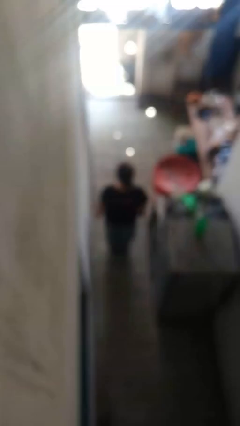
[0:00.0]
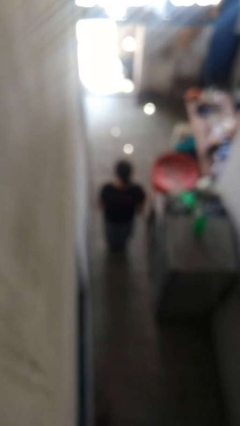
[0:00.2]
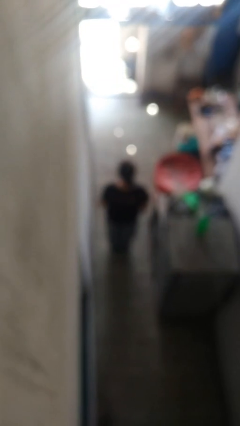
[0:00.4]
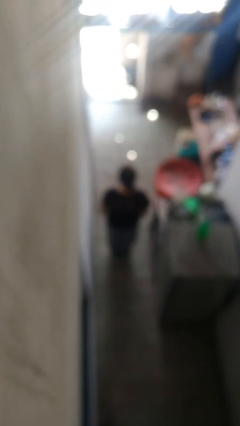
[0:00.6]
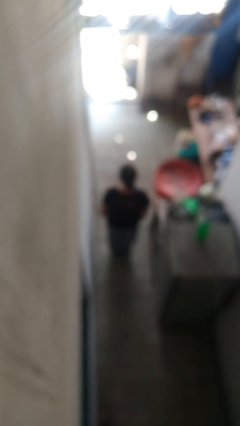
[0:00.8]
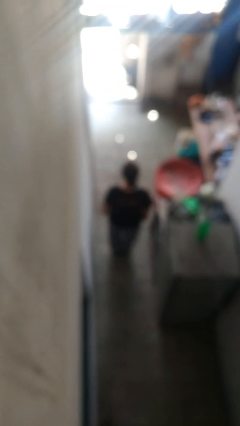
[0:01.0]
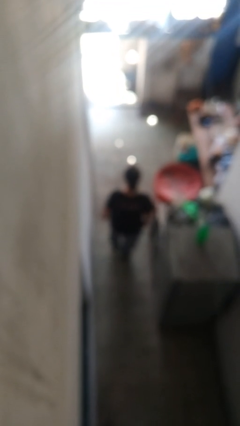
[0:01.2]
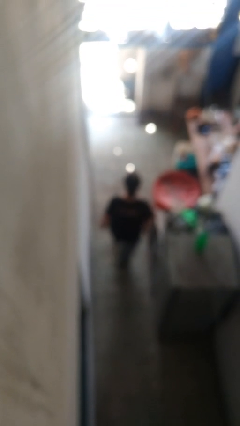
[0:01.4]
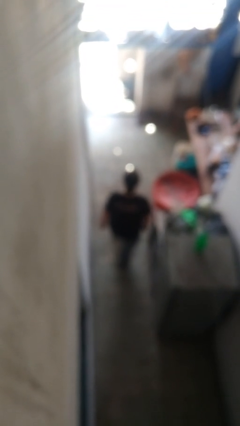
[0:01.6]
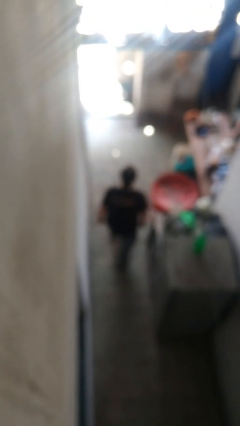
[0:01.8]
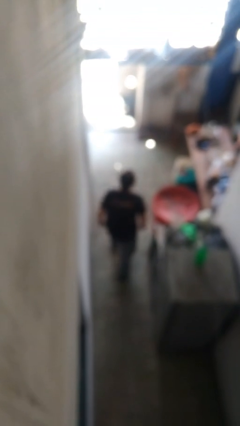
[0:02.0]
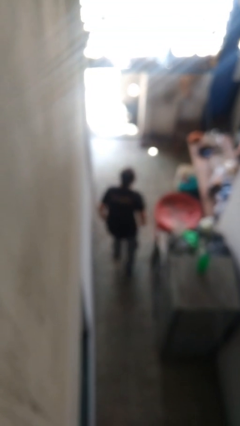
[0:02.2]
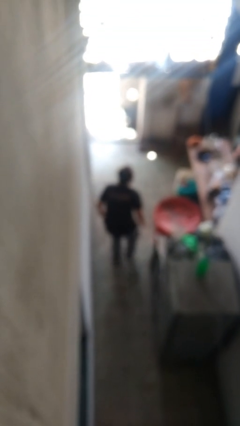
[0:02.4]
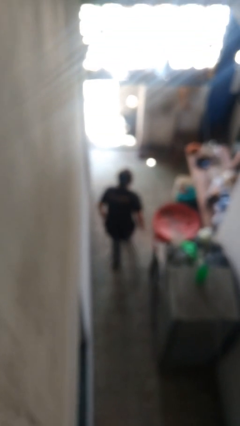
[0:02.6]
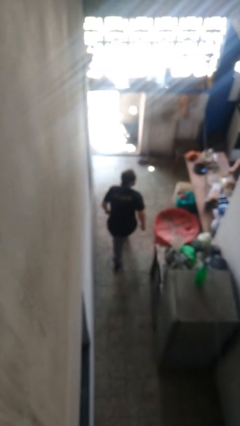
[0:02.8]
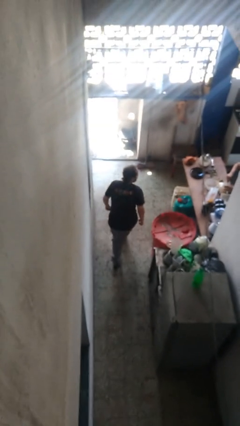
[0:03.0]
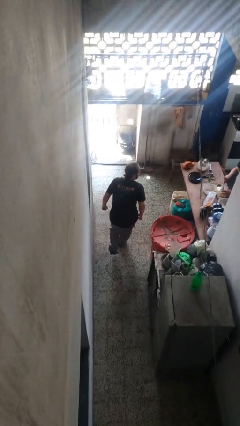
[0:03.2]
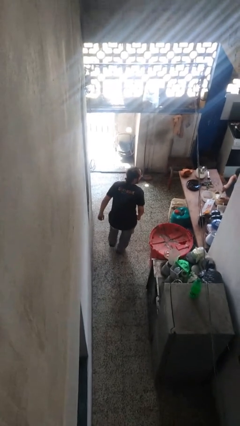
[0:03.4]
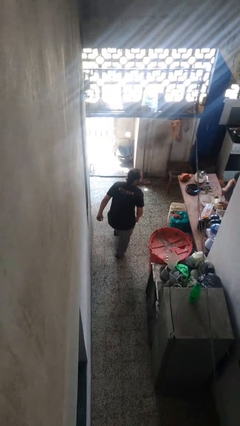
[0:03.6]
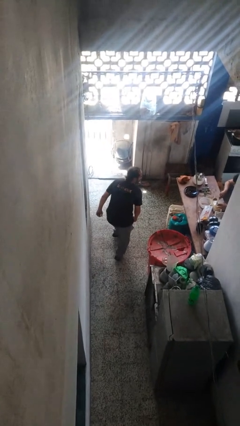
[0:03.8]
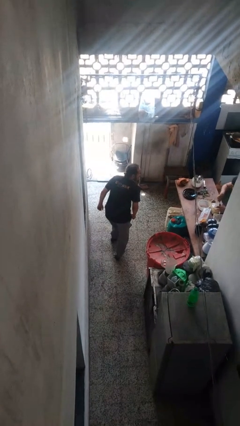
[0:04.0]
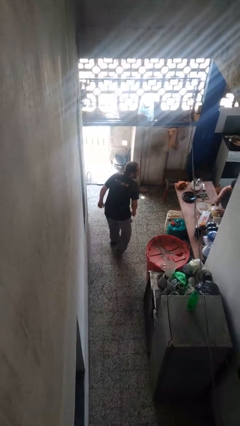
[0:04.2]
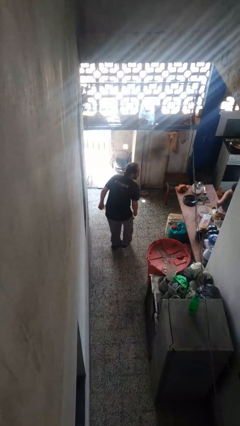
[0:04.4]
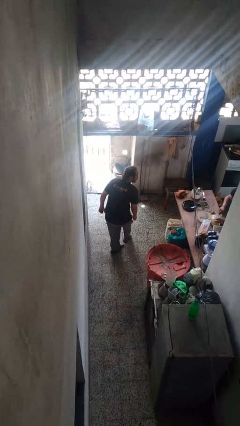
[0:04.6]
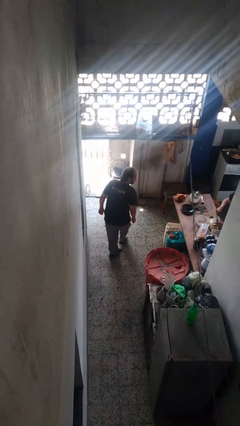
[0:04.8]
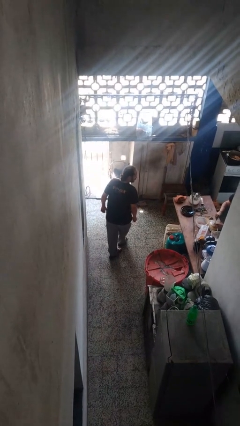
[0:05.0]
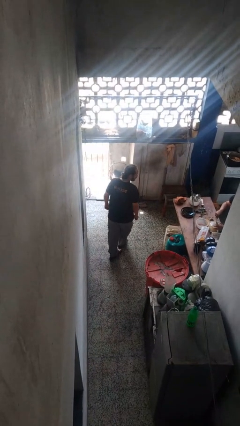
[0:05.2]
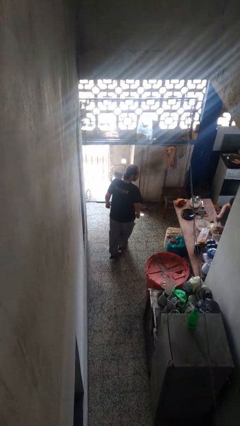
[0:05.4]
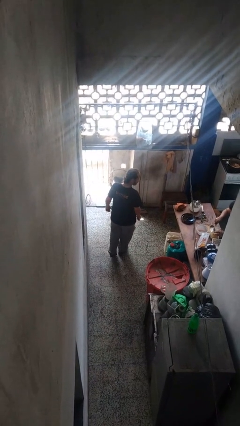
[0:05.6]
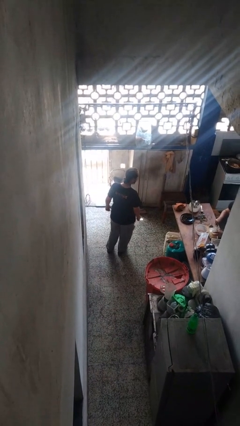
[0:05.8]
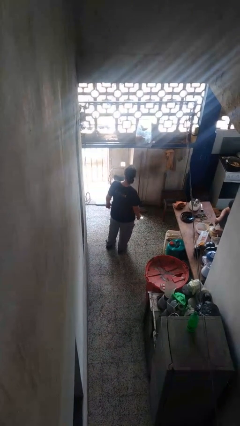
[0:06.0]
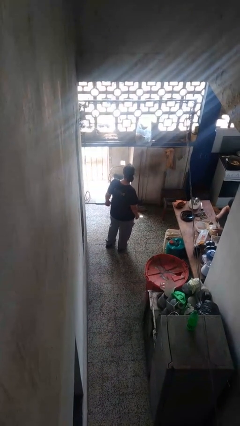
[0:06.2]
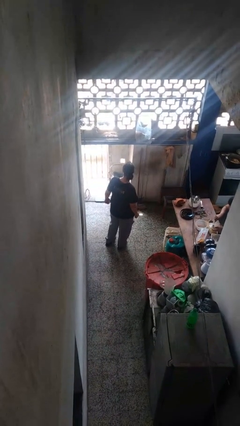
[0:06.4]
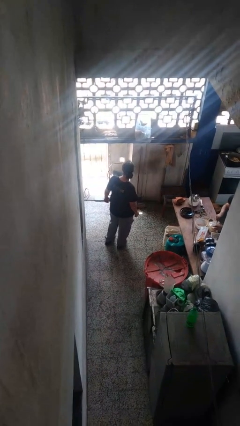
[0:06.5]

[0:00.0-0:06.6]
person walks tiptoe

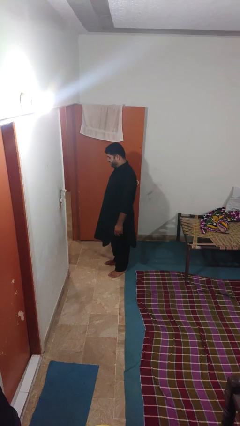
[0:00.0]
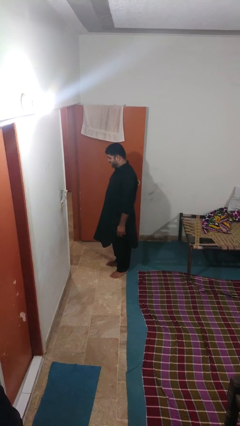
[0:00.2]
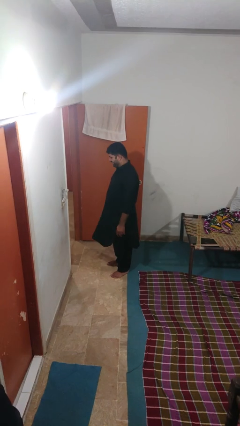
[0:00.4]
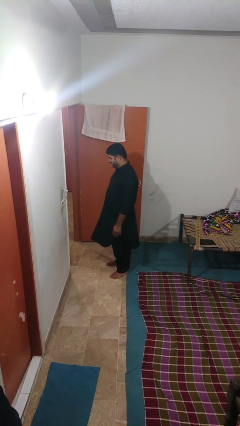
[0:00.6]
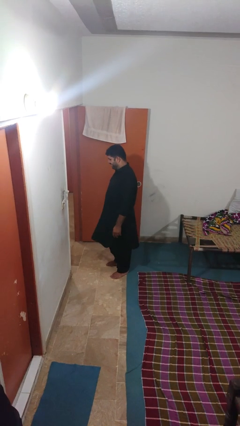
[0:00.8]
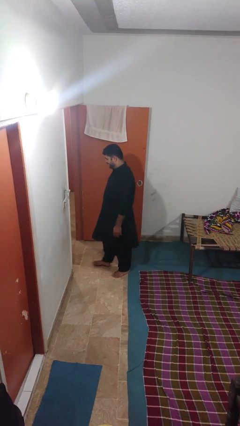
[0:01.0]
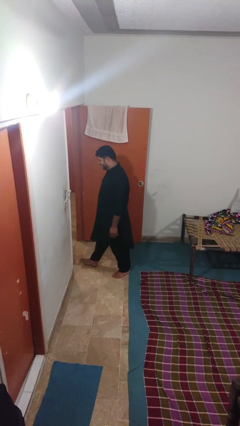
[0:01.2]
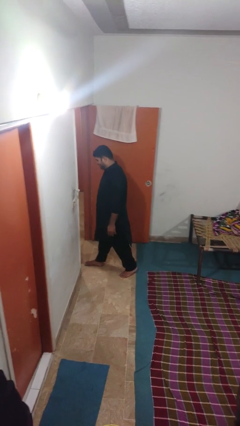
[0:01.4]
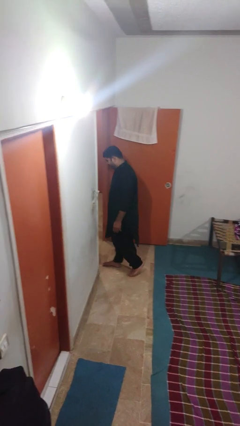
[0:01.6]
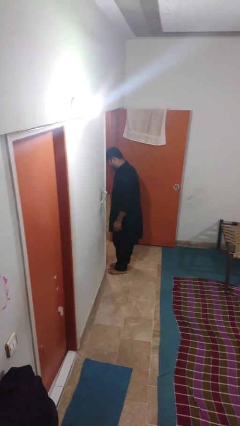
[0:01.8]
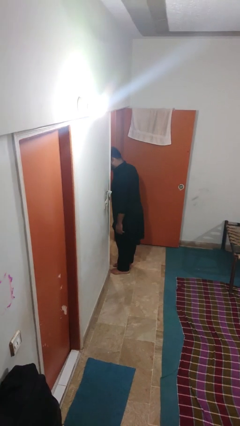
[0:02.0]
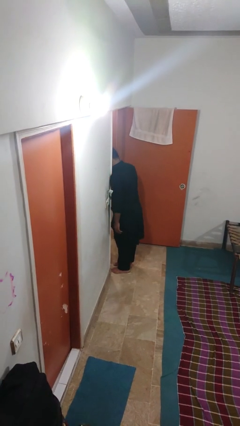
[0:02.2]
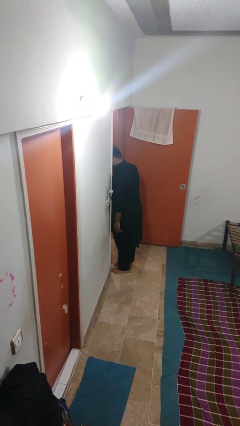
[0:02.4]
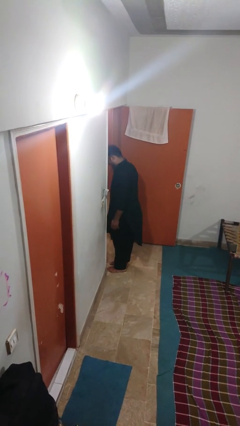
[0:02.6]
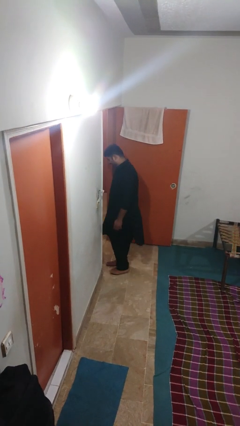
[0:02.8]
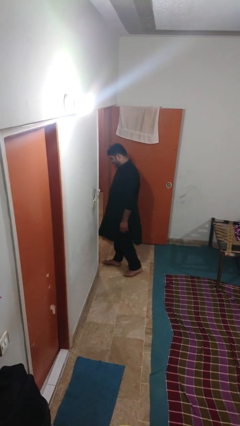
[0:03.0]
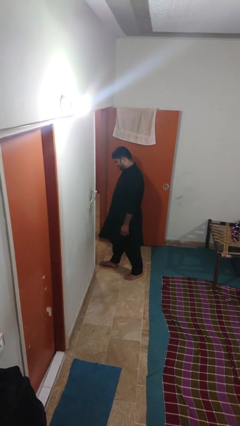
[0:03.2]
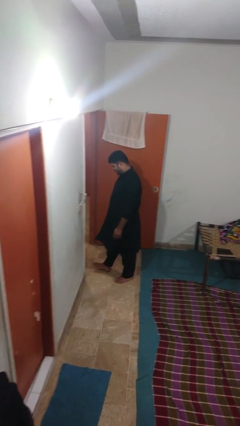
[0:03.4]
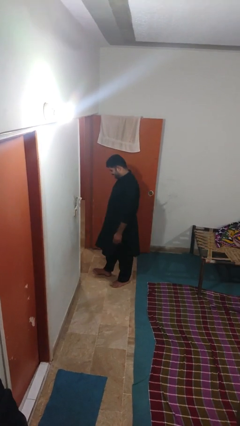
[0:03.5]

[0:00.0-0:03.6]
person bumps into wall

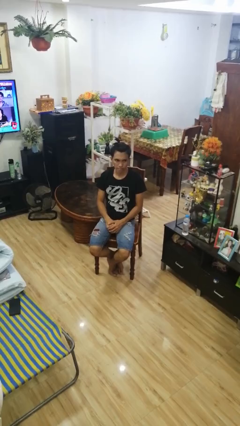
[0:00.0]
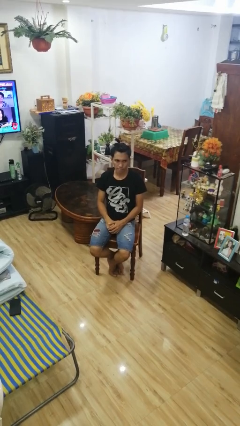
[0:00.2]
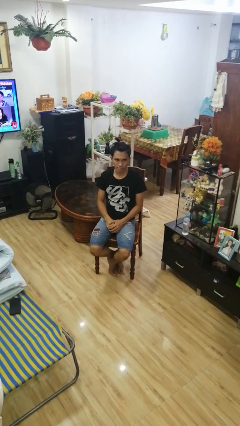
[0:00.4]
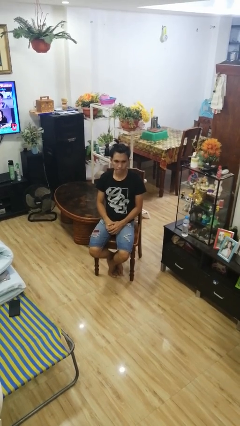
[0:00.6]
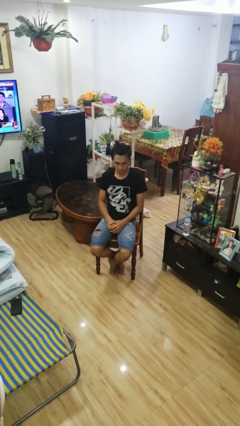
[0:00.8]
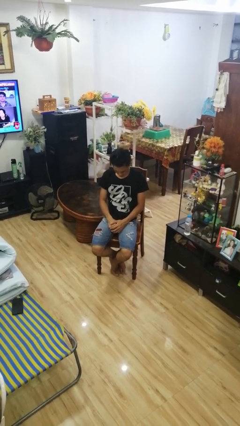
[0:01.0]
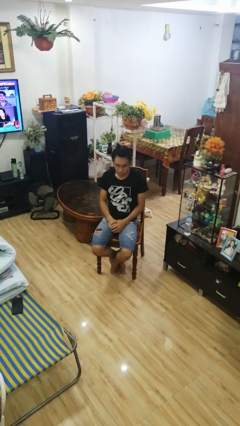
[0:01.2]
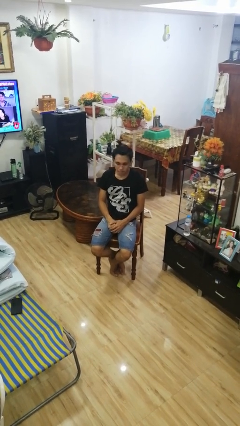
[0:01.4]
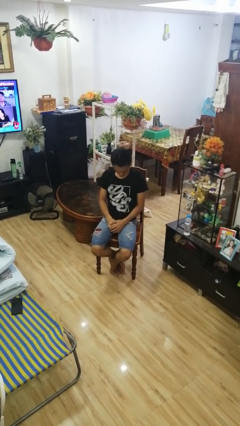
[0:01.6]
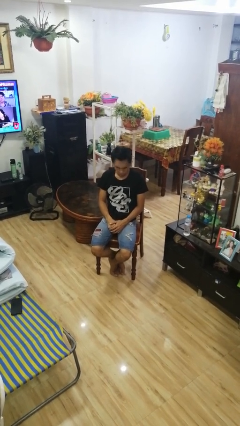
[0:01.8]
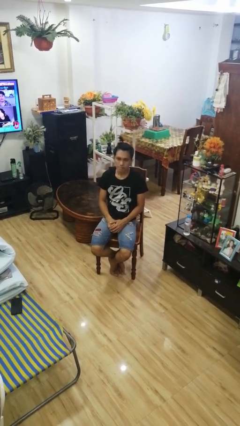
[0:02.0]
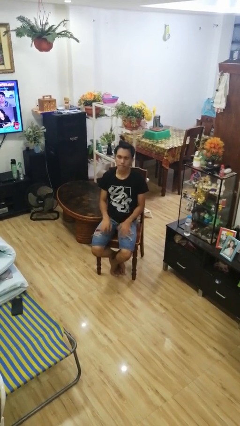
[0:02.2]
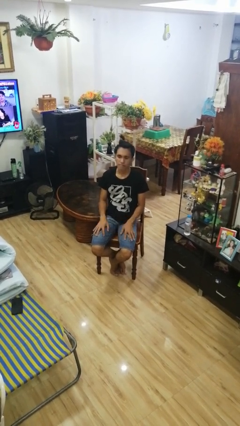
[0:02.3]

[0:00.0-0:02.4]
person nods head

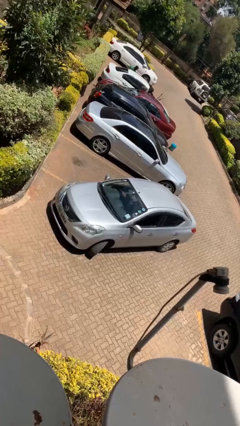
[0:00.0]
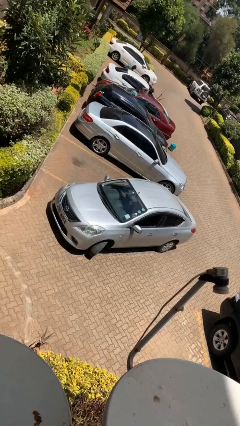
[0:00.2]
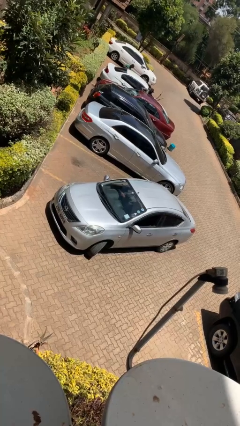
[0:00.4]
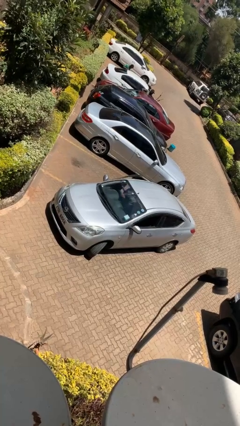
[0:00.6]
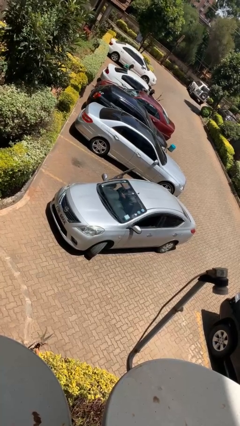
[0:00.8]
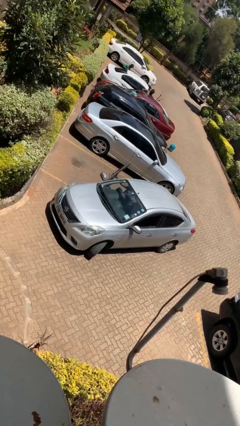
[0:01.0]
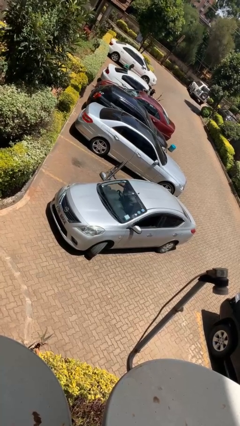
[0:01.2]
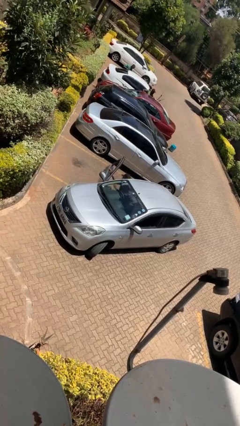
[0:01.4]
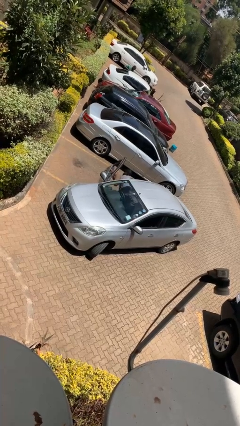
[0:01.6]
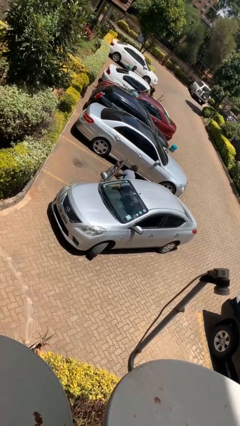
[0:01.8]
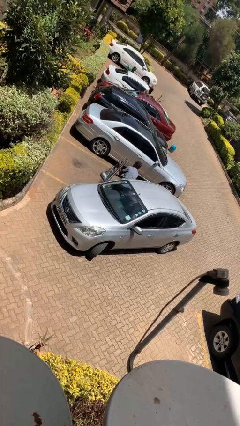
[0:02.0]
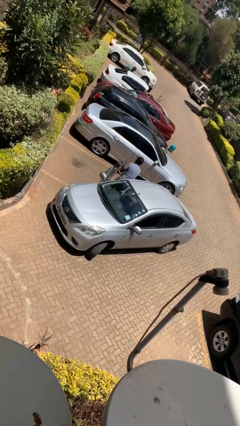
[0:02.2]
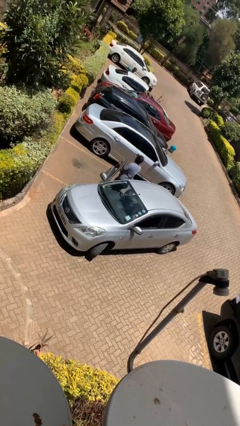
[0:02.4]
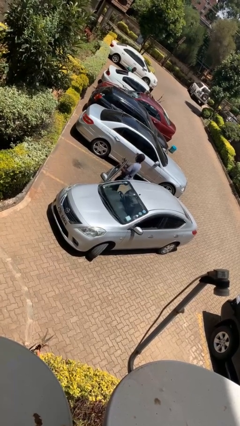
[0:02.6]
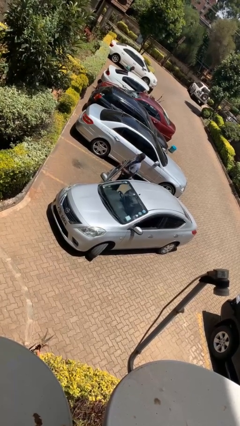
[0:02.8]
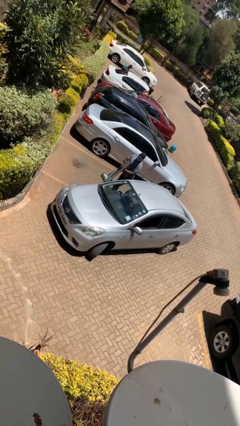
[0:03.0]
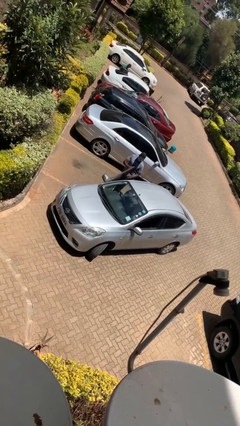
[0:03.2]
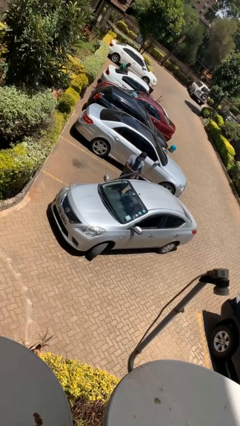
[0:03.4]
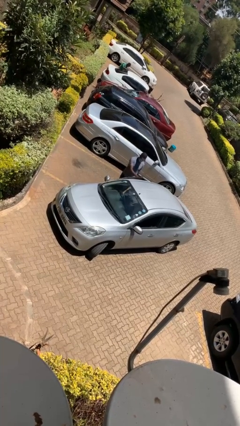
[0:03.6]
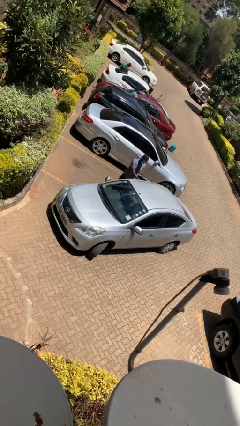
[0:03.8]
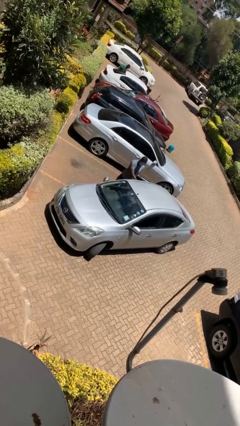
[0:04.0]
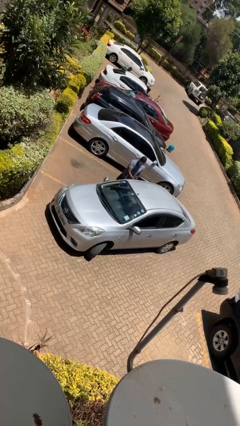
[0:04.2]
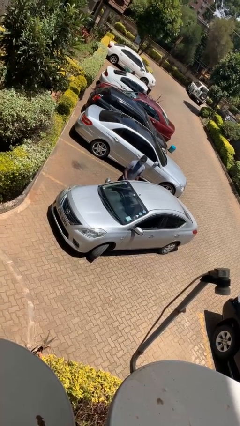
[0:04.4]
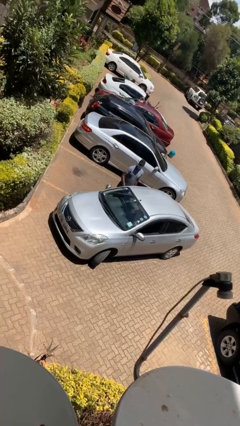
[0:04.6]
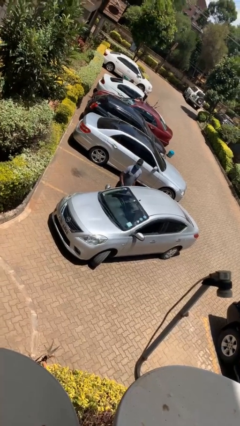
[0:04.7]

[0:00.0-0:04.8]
car drops off person
